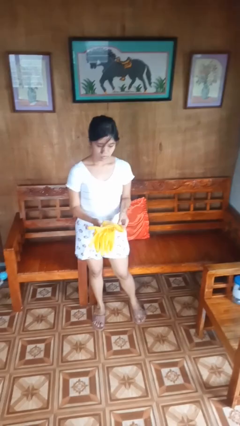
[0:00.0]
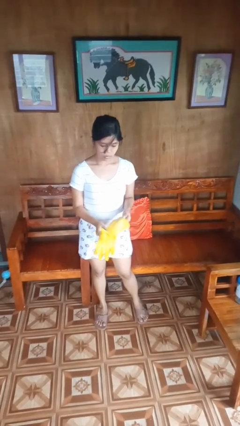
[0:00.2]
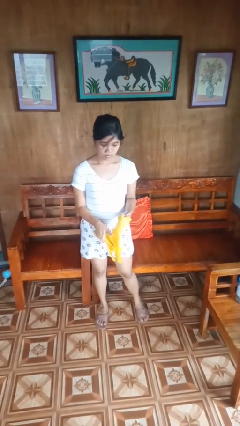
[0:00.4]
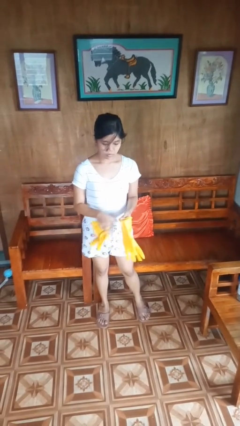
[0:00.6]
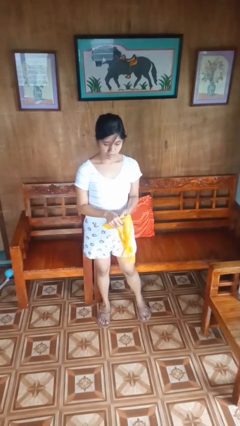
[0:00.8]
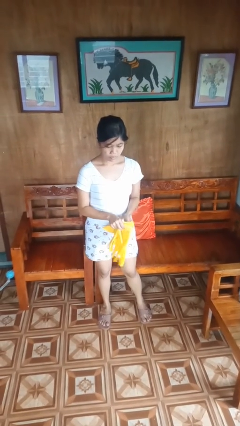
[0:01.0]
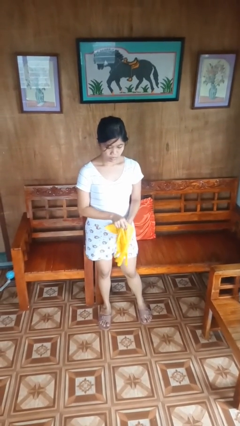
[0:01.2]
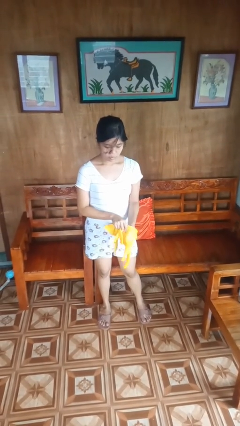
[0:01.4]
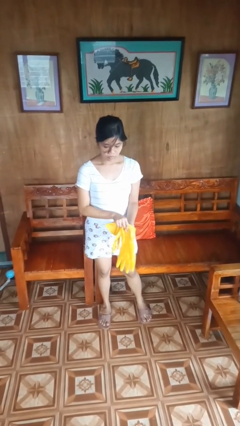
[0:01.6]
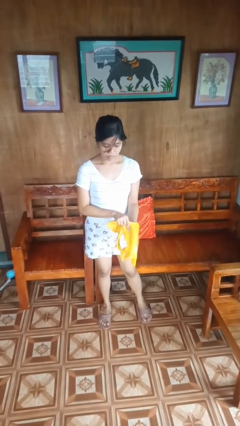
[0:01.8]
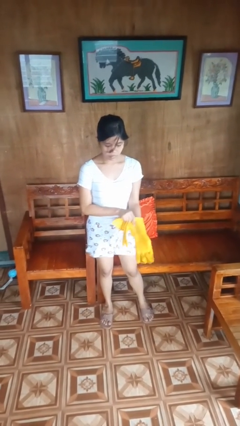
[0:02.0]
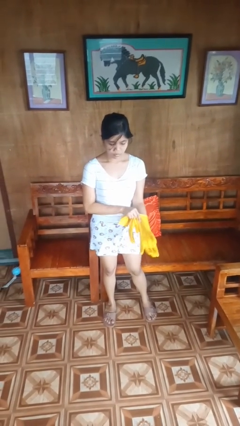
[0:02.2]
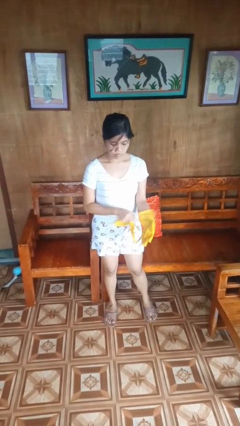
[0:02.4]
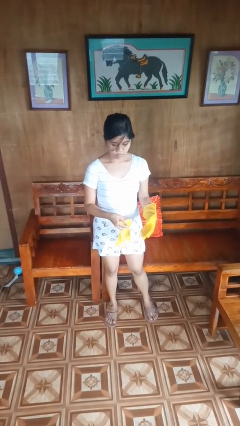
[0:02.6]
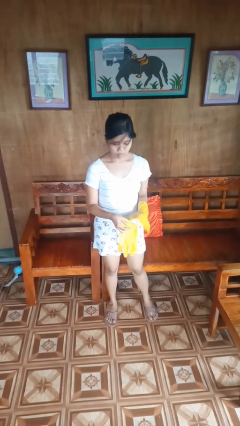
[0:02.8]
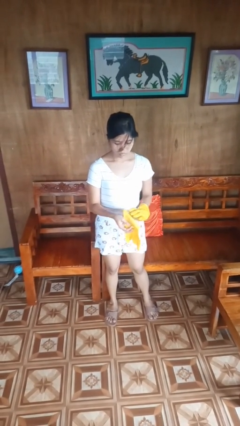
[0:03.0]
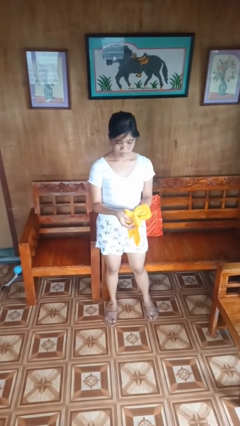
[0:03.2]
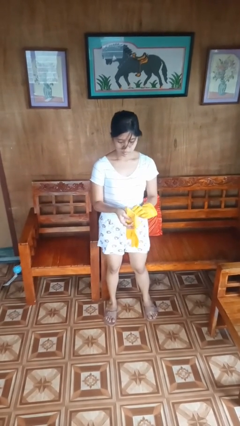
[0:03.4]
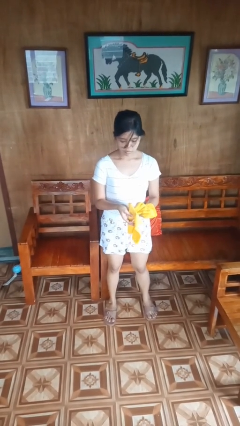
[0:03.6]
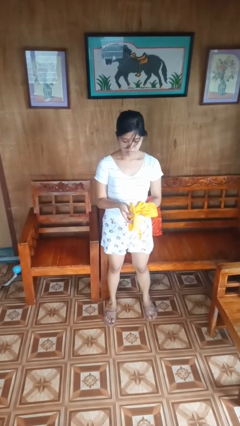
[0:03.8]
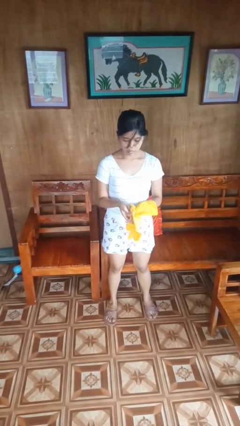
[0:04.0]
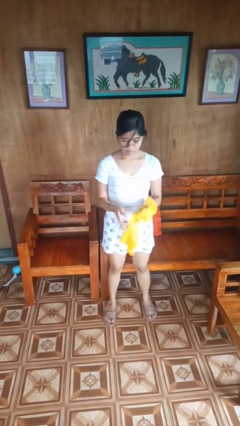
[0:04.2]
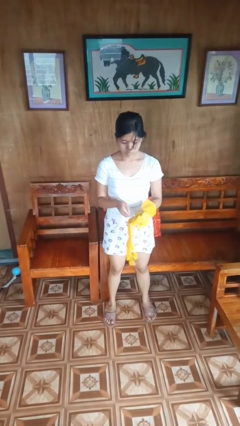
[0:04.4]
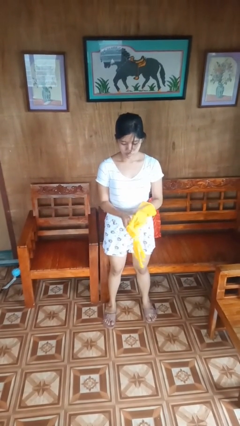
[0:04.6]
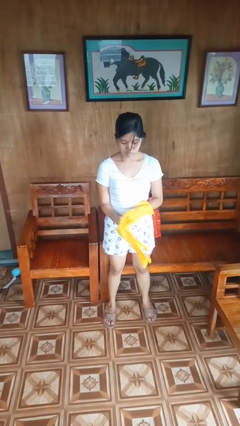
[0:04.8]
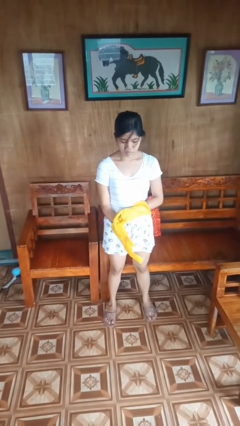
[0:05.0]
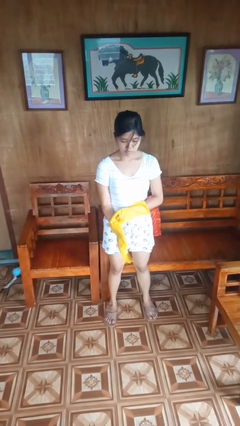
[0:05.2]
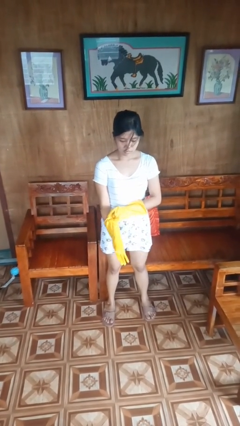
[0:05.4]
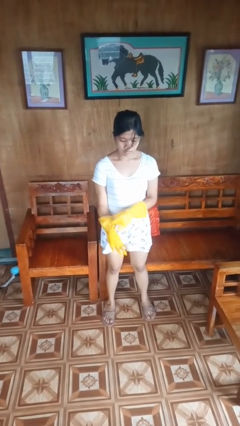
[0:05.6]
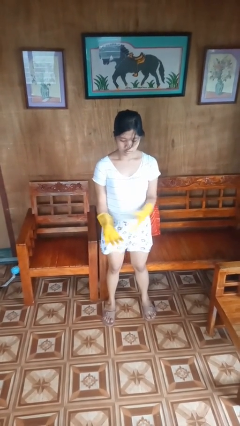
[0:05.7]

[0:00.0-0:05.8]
person puts on gloves

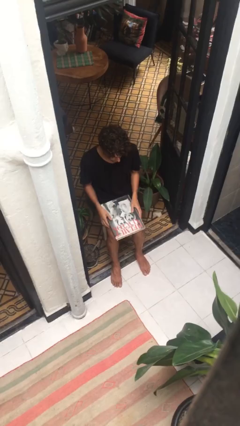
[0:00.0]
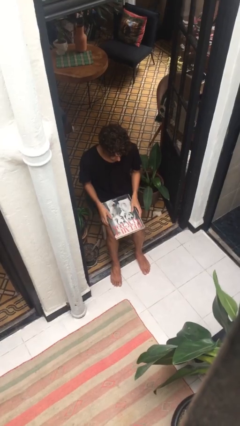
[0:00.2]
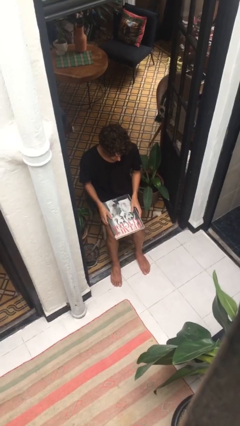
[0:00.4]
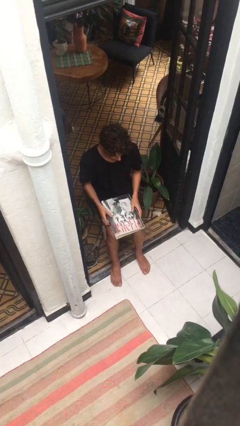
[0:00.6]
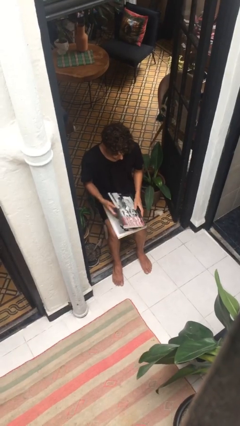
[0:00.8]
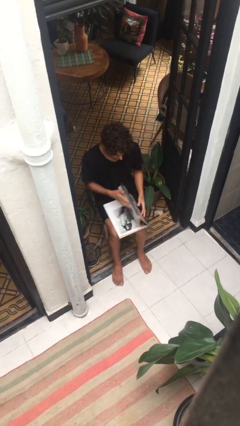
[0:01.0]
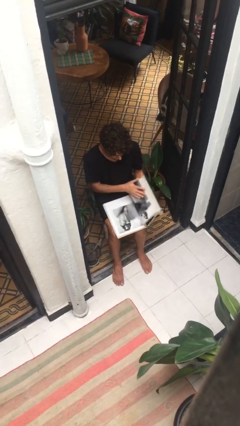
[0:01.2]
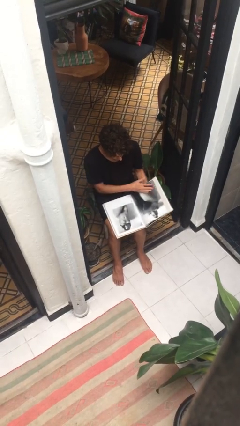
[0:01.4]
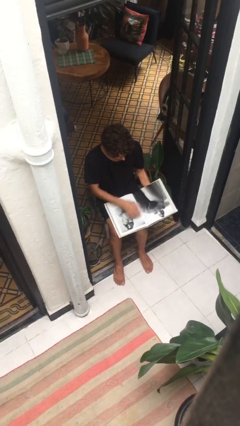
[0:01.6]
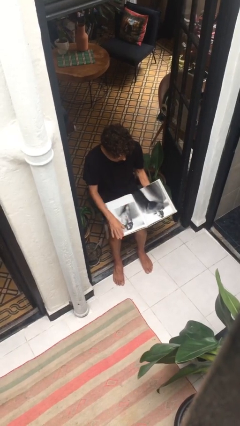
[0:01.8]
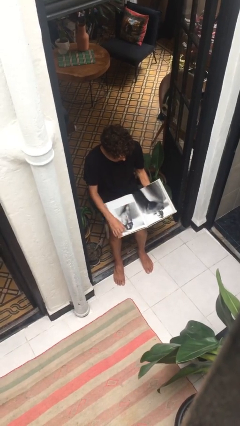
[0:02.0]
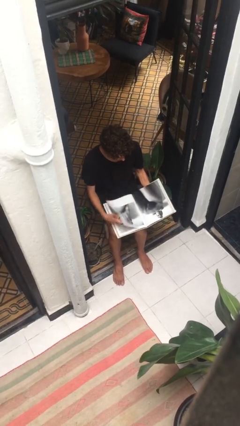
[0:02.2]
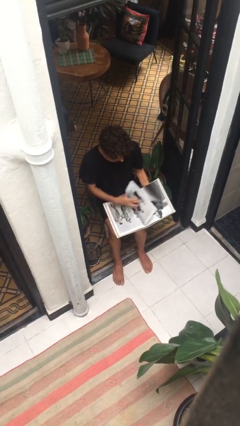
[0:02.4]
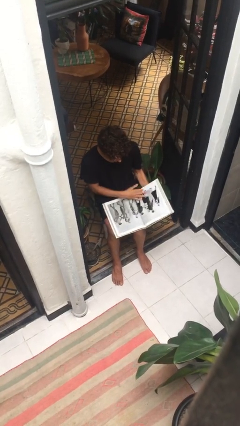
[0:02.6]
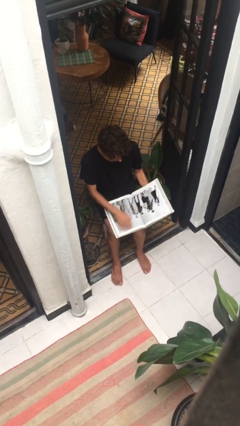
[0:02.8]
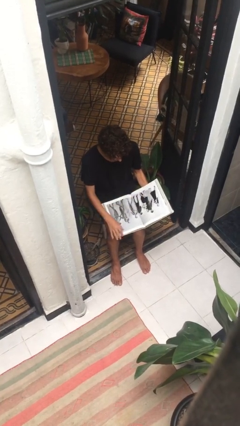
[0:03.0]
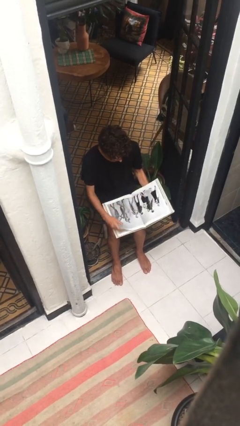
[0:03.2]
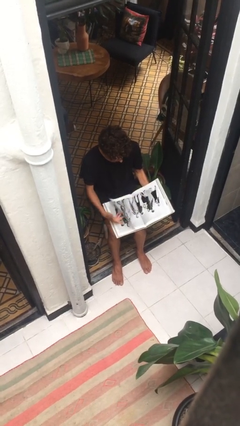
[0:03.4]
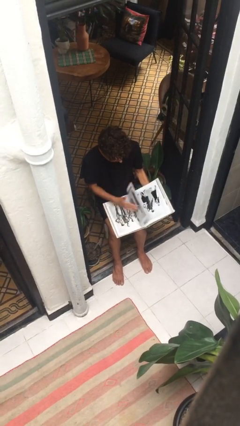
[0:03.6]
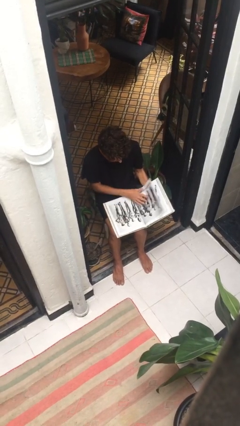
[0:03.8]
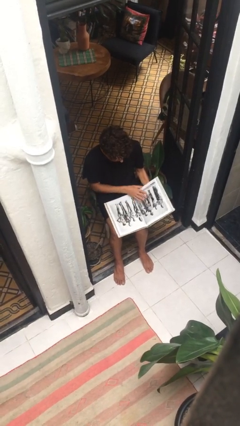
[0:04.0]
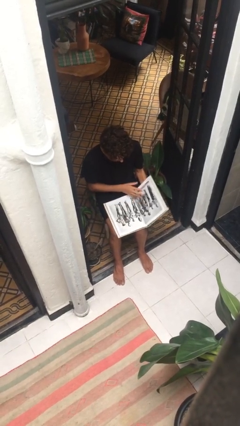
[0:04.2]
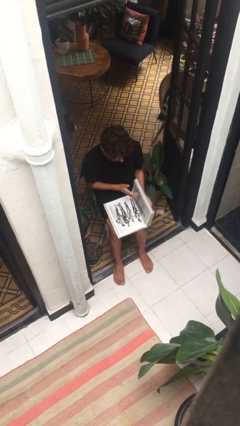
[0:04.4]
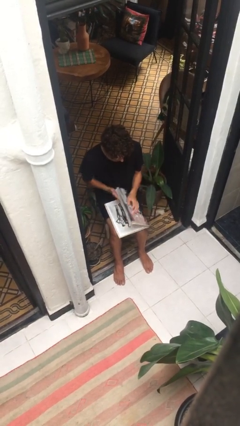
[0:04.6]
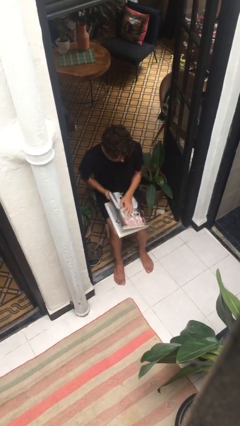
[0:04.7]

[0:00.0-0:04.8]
person reads document

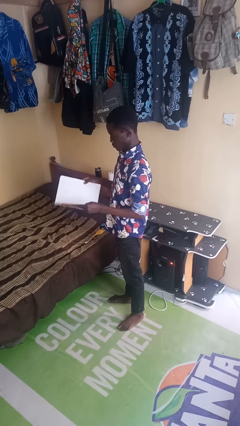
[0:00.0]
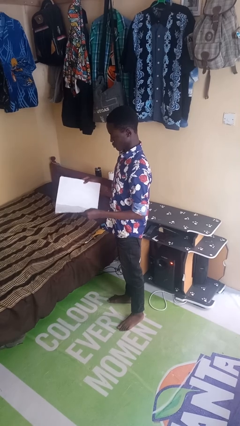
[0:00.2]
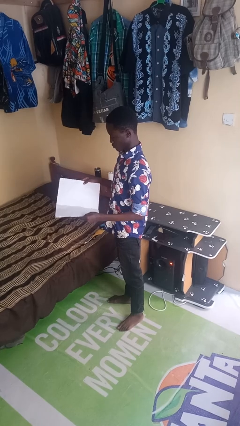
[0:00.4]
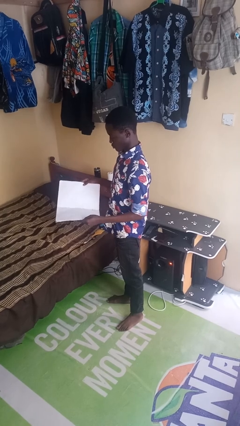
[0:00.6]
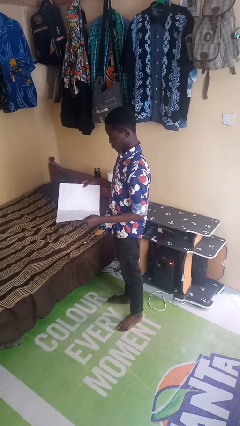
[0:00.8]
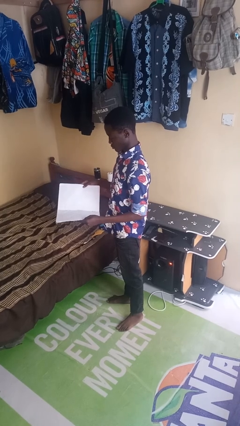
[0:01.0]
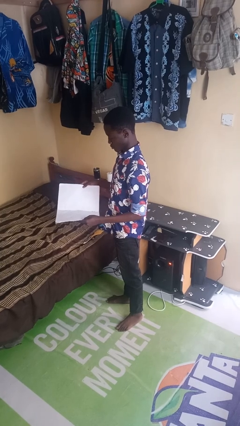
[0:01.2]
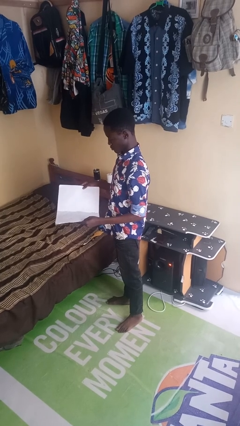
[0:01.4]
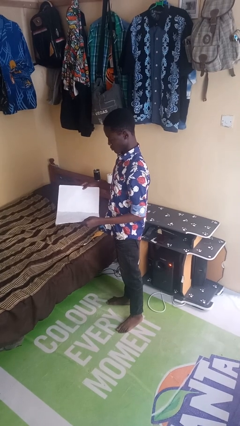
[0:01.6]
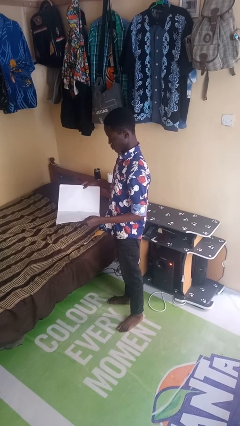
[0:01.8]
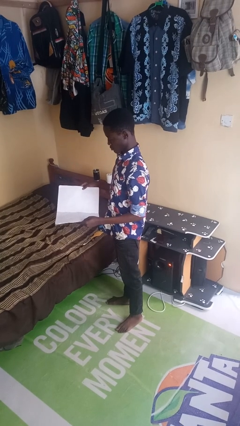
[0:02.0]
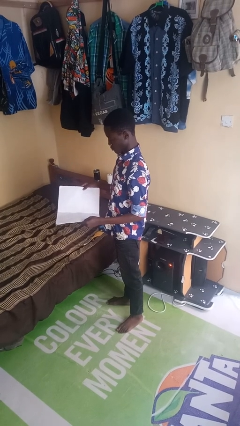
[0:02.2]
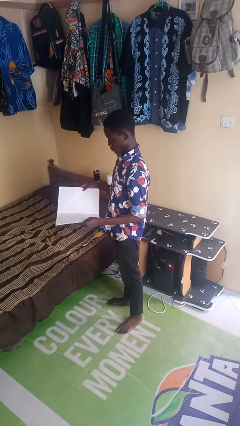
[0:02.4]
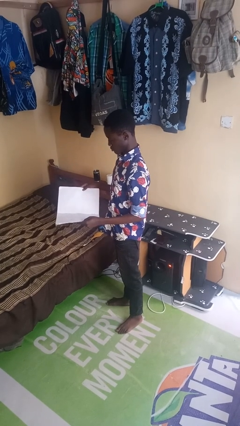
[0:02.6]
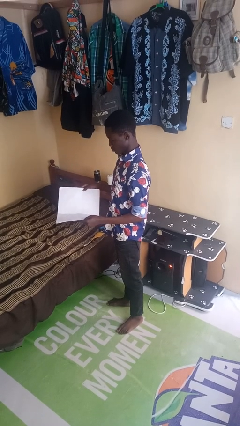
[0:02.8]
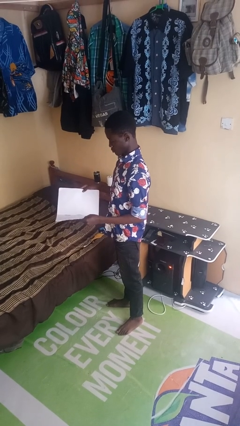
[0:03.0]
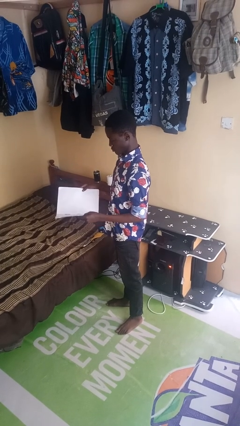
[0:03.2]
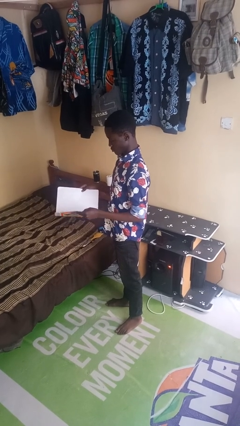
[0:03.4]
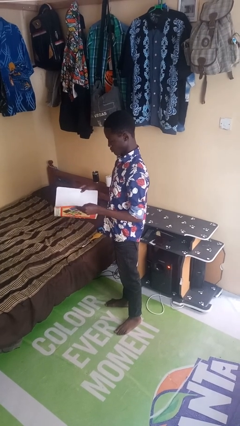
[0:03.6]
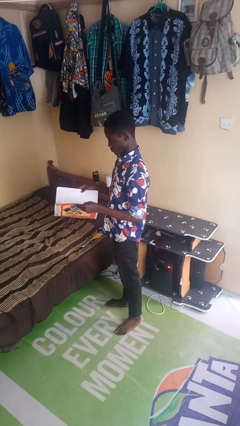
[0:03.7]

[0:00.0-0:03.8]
person reads newspaper

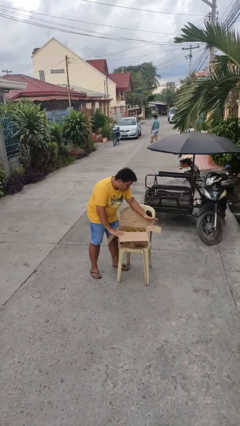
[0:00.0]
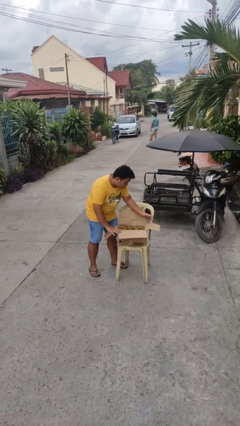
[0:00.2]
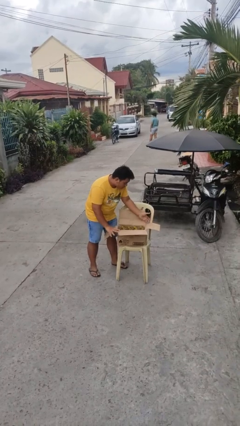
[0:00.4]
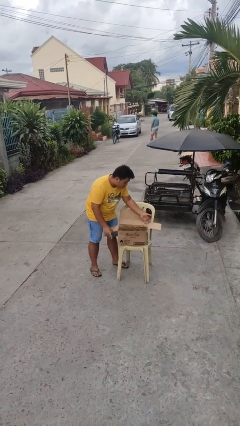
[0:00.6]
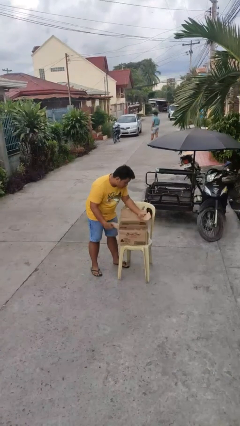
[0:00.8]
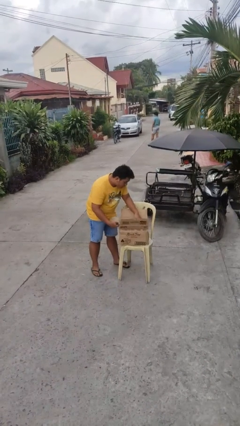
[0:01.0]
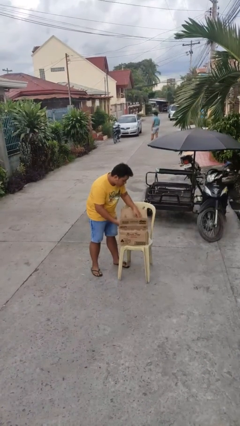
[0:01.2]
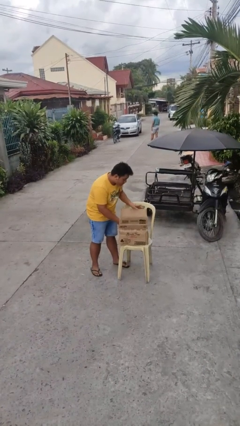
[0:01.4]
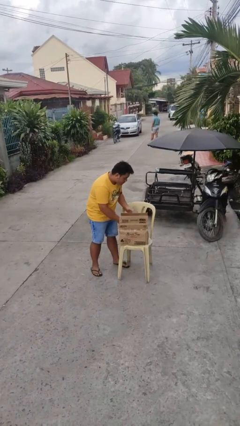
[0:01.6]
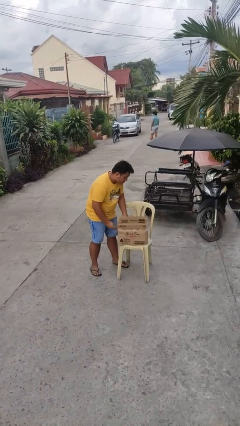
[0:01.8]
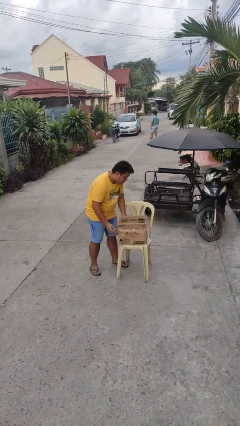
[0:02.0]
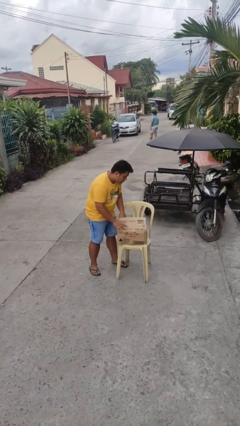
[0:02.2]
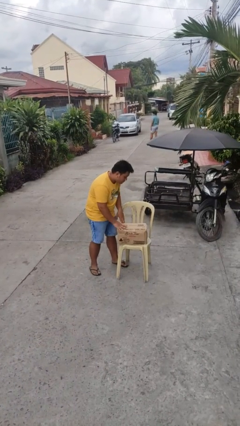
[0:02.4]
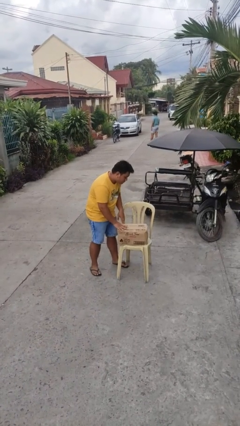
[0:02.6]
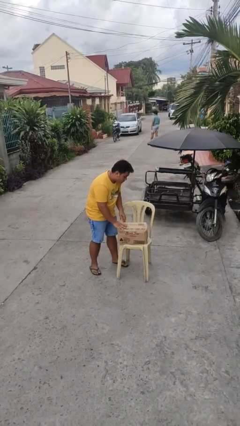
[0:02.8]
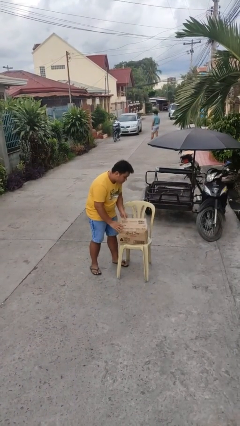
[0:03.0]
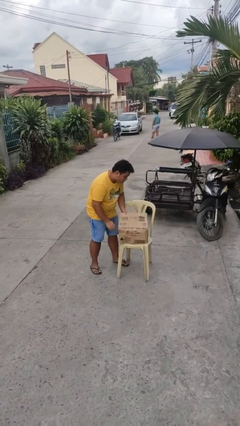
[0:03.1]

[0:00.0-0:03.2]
person closes box
